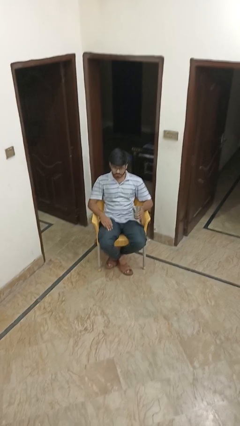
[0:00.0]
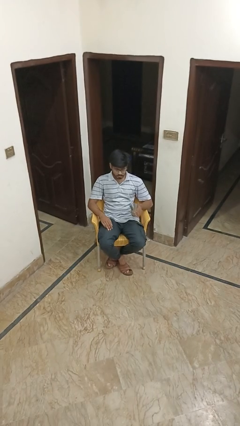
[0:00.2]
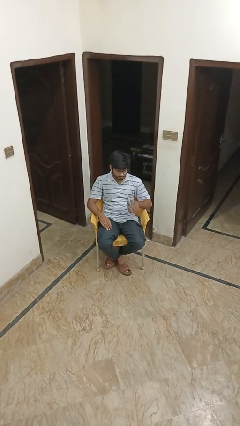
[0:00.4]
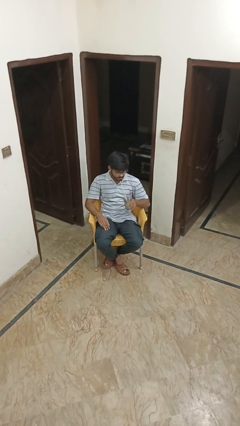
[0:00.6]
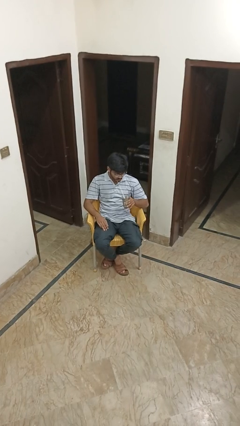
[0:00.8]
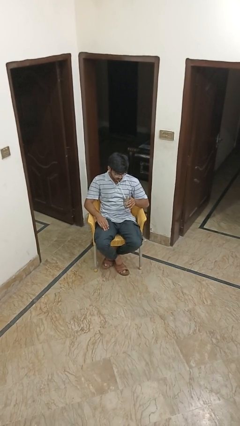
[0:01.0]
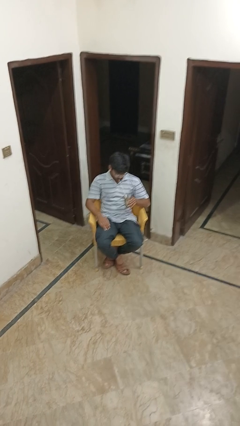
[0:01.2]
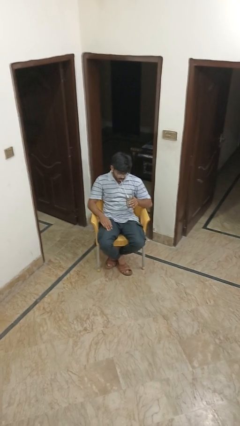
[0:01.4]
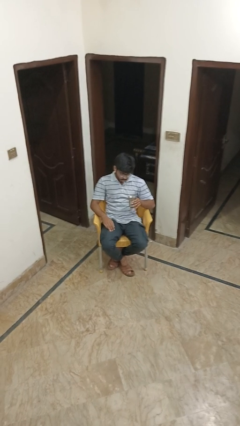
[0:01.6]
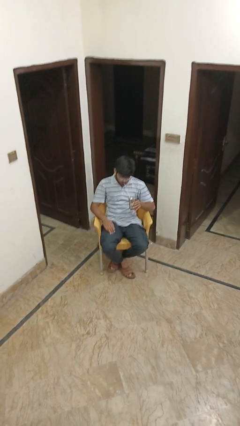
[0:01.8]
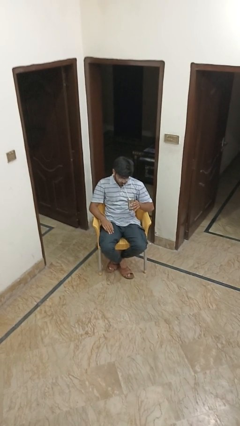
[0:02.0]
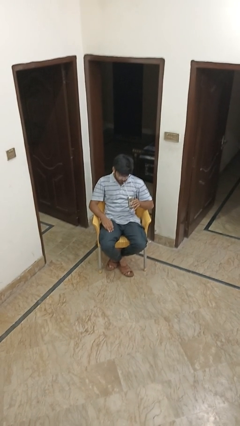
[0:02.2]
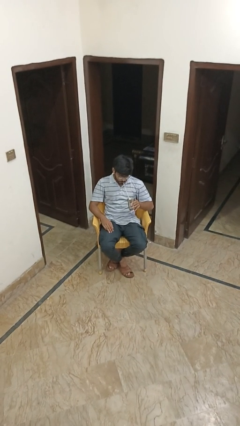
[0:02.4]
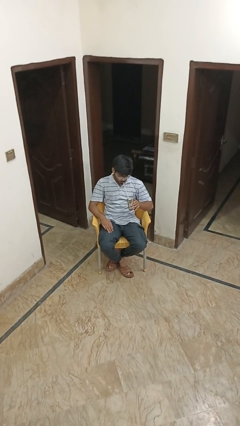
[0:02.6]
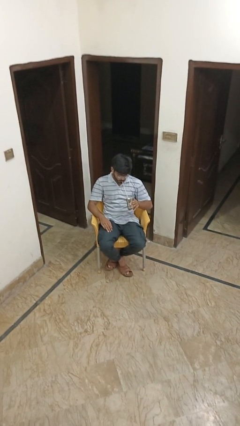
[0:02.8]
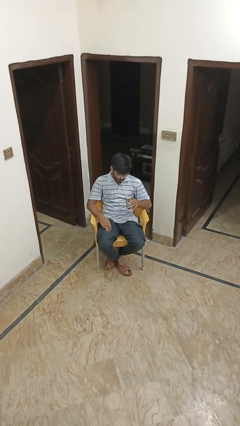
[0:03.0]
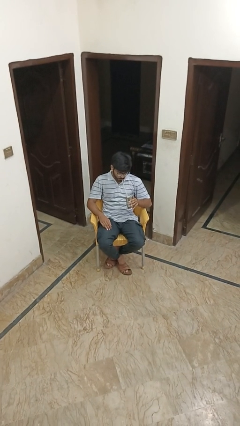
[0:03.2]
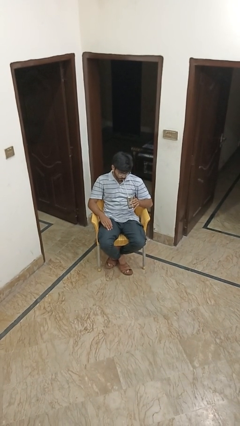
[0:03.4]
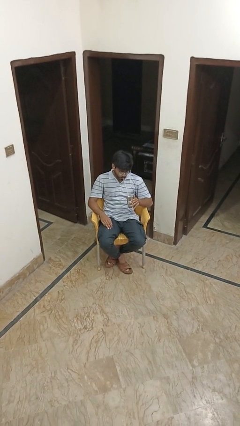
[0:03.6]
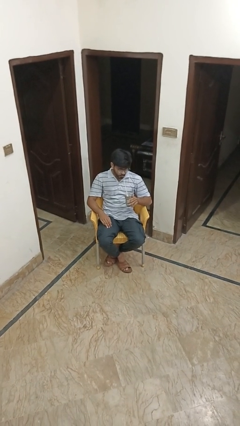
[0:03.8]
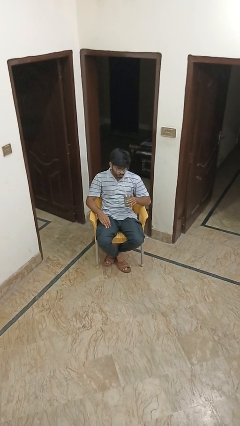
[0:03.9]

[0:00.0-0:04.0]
person drinks from straw

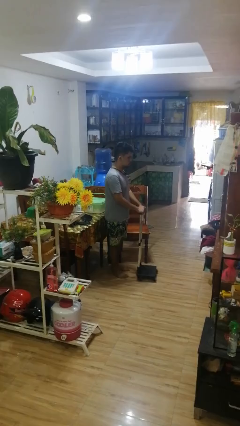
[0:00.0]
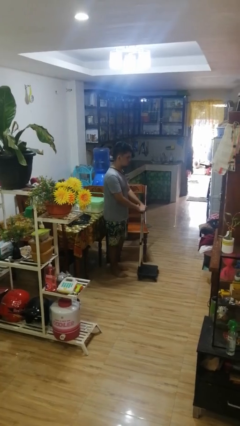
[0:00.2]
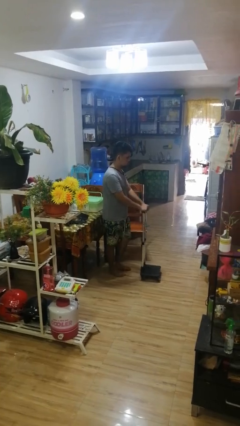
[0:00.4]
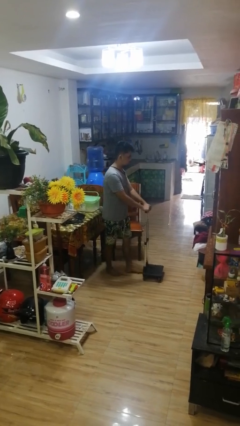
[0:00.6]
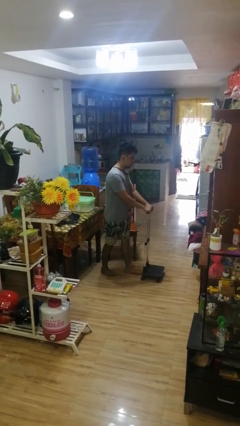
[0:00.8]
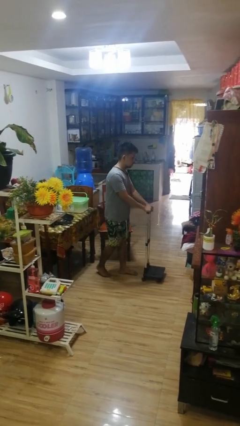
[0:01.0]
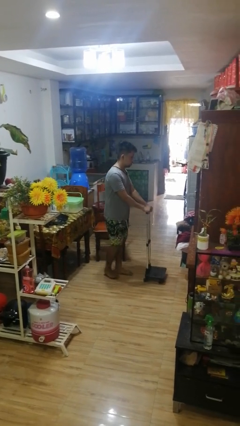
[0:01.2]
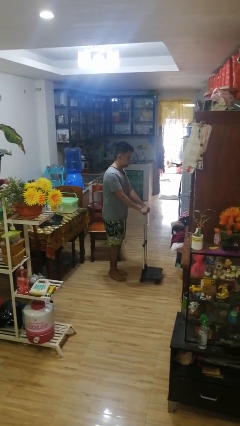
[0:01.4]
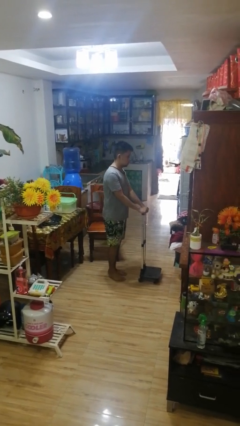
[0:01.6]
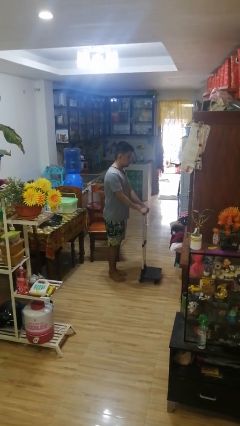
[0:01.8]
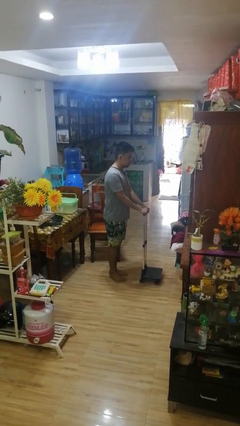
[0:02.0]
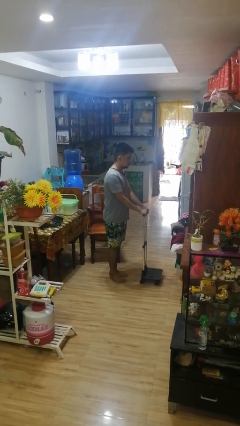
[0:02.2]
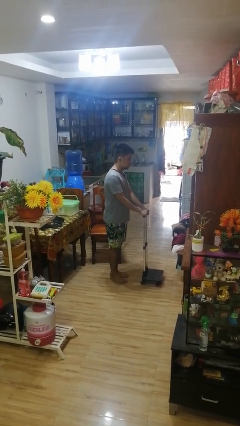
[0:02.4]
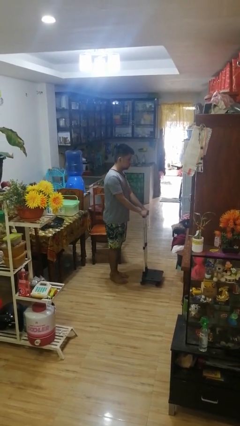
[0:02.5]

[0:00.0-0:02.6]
person pushes wheeled cart

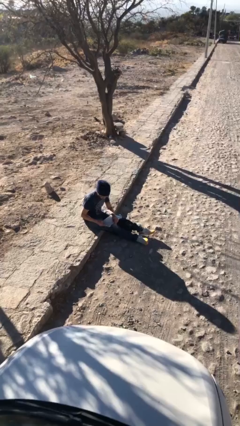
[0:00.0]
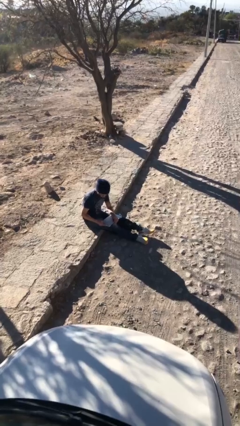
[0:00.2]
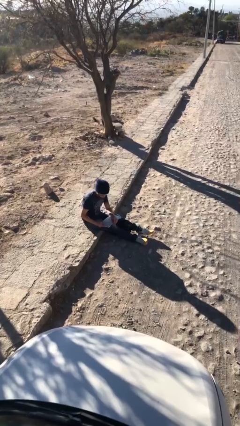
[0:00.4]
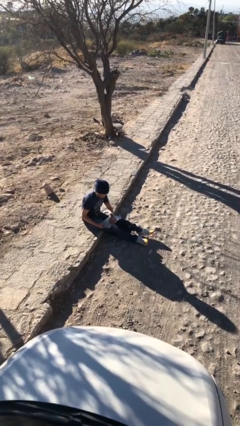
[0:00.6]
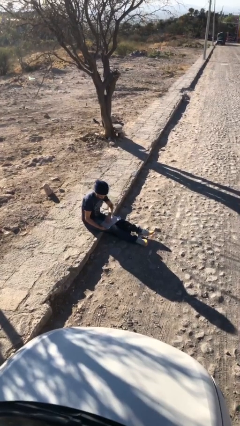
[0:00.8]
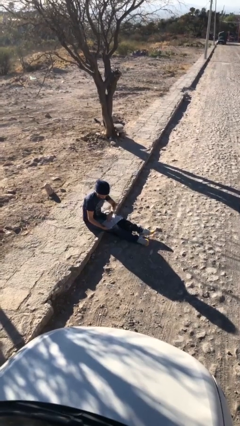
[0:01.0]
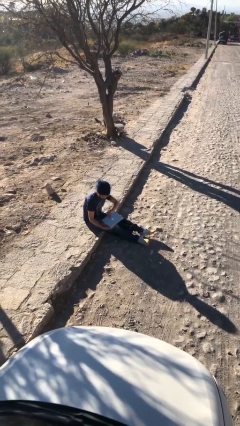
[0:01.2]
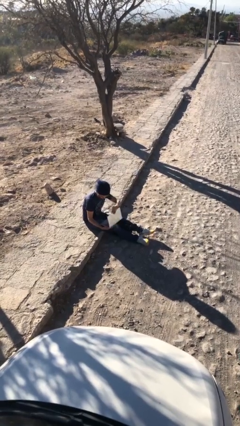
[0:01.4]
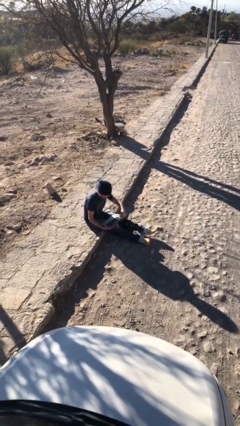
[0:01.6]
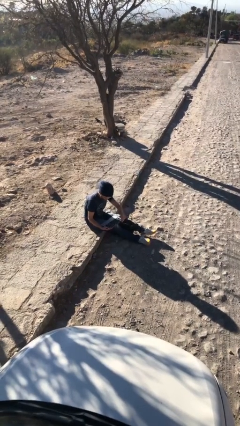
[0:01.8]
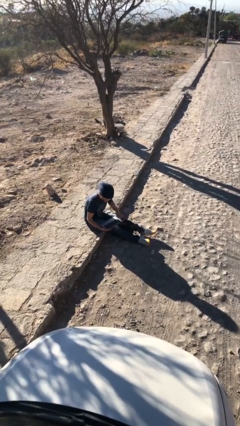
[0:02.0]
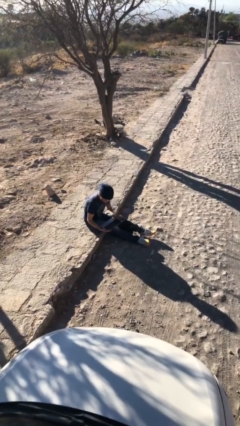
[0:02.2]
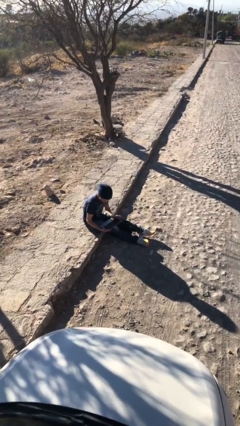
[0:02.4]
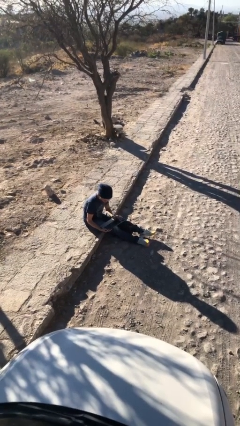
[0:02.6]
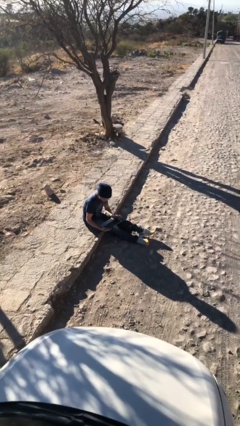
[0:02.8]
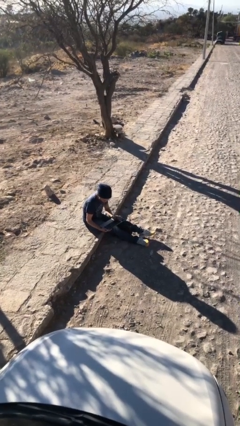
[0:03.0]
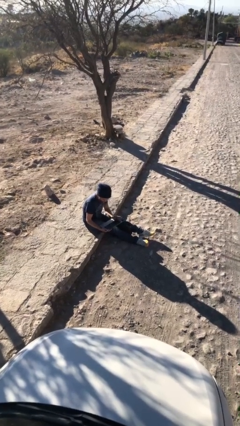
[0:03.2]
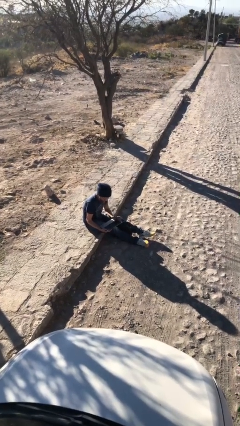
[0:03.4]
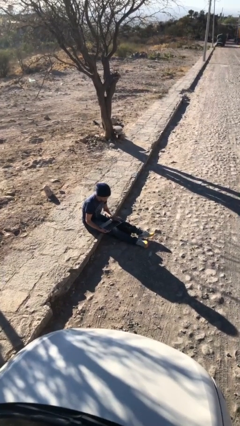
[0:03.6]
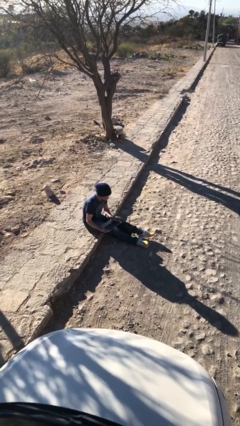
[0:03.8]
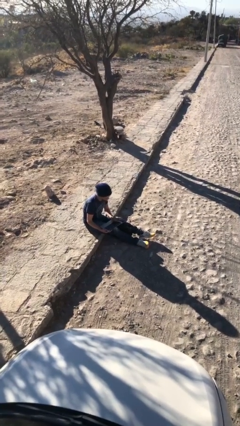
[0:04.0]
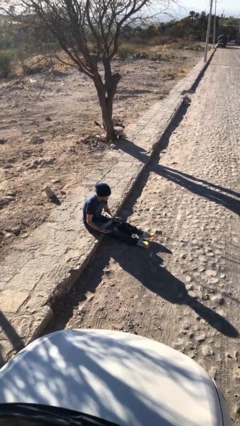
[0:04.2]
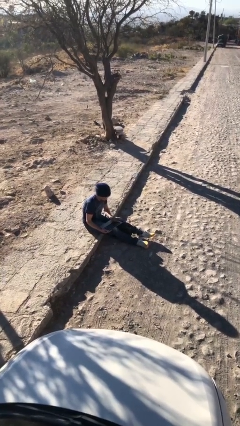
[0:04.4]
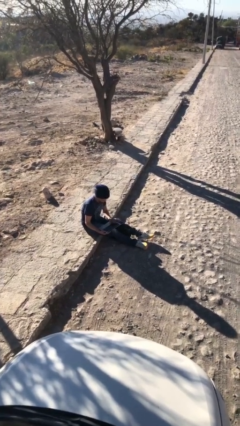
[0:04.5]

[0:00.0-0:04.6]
person interacts with laptop

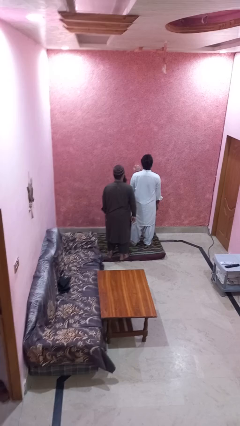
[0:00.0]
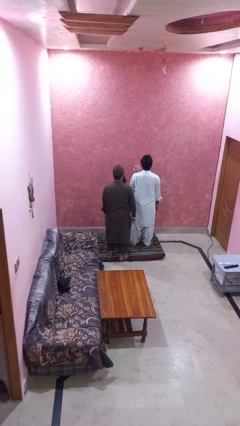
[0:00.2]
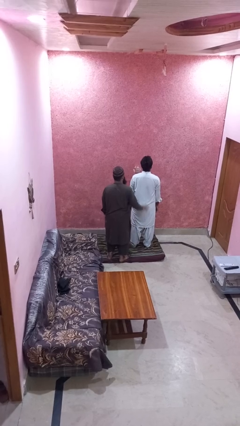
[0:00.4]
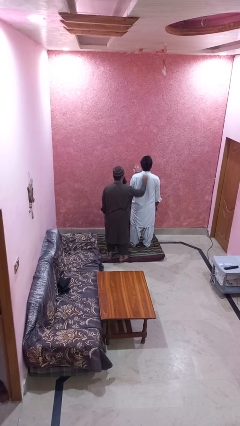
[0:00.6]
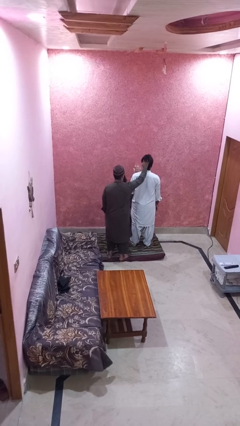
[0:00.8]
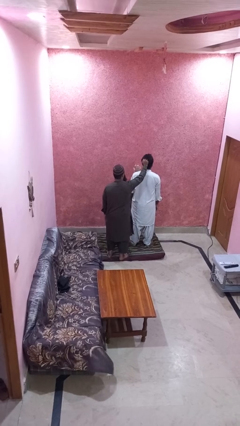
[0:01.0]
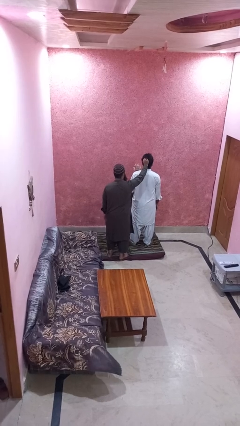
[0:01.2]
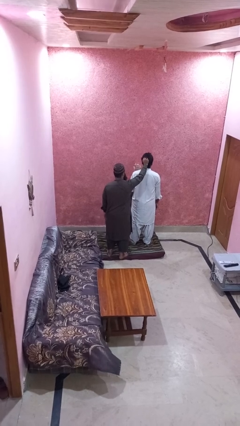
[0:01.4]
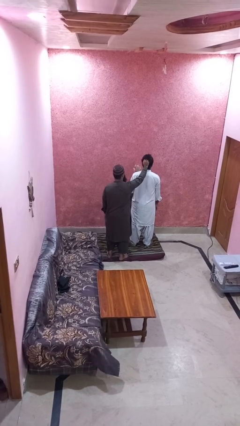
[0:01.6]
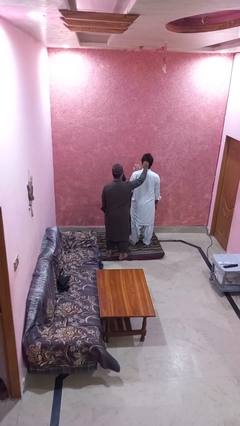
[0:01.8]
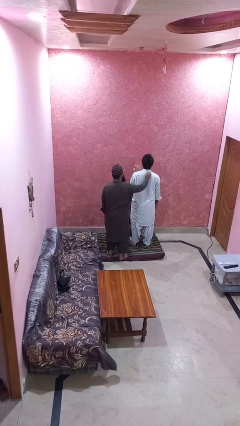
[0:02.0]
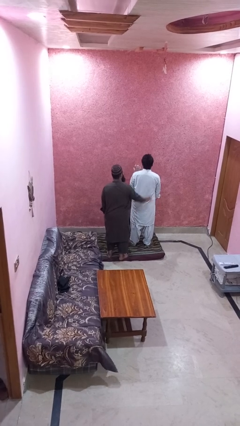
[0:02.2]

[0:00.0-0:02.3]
person grabs person by hair

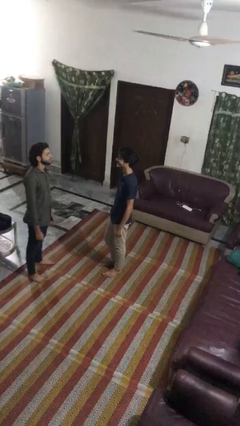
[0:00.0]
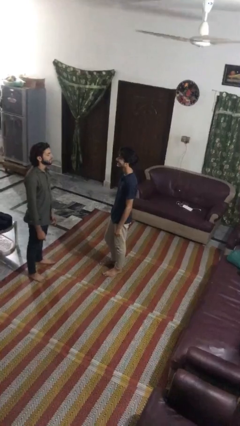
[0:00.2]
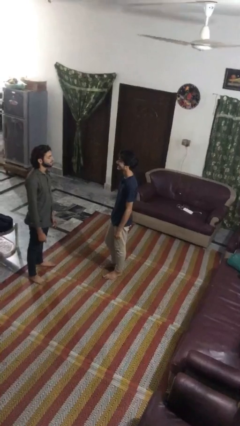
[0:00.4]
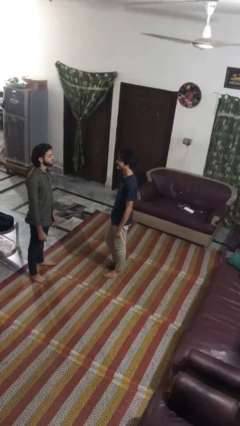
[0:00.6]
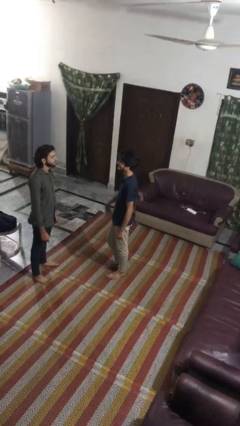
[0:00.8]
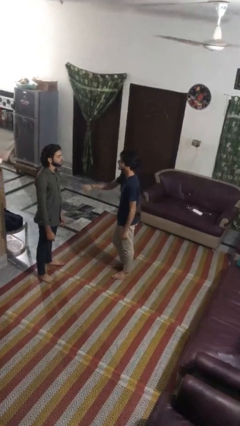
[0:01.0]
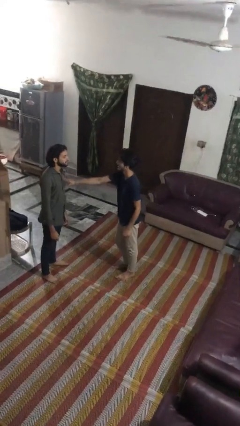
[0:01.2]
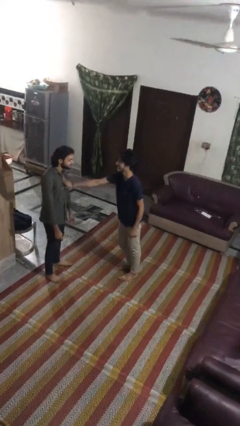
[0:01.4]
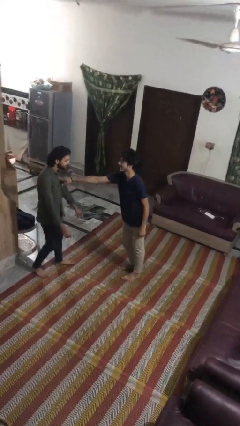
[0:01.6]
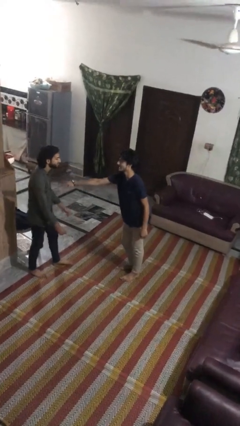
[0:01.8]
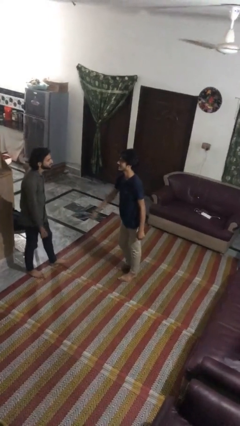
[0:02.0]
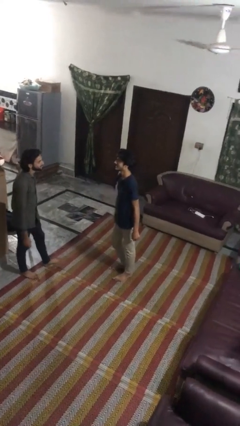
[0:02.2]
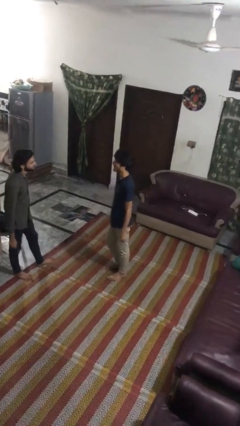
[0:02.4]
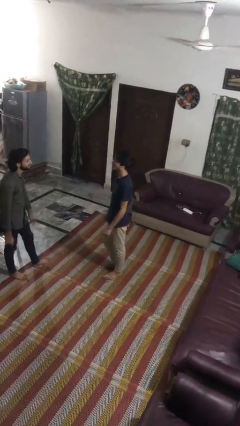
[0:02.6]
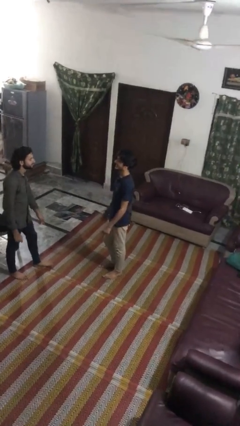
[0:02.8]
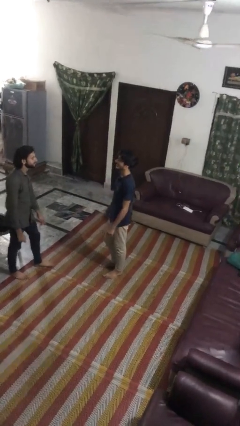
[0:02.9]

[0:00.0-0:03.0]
person shoves person

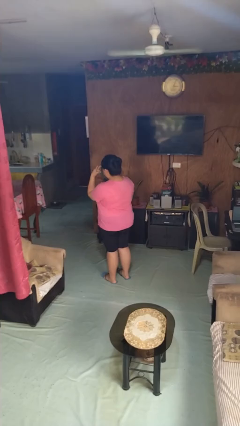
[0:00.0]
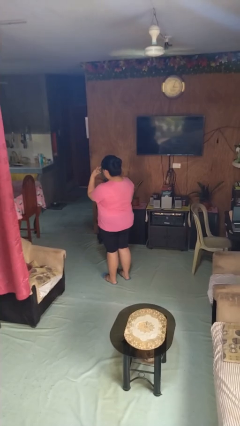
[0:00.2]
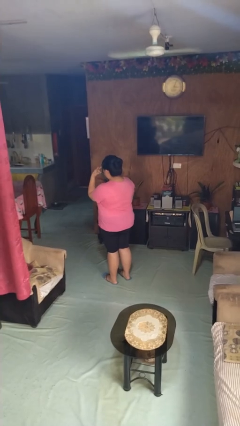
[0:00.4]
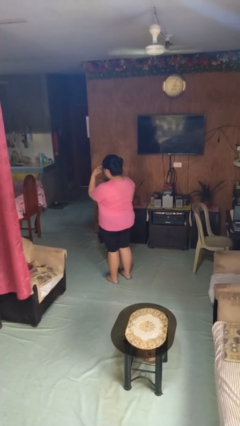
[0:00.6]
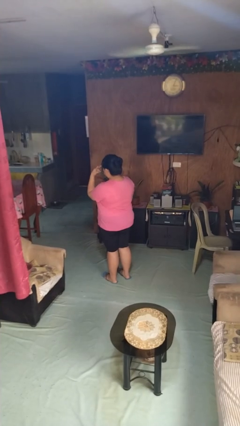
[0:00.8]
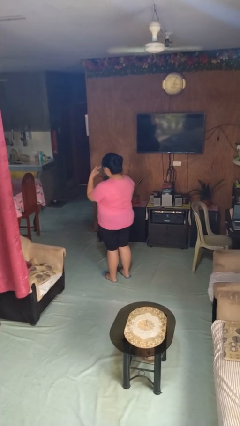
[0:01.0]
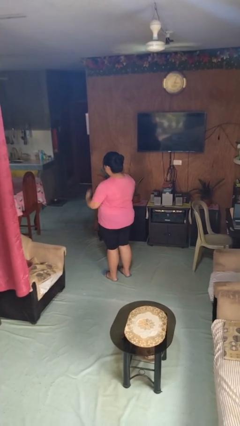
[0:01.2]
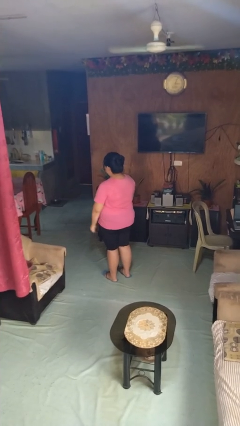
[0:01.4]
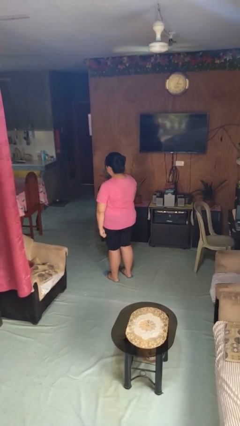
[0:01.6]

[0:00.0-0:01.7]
person gestures watch closely
